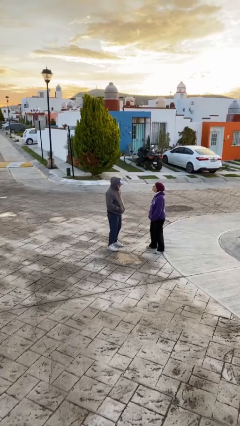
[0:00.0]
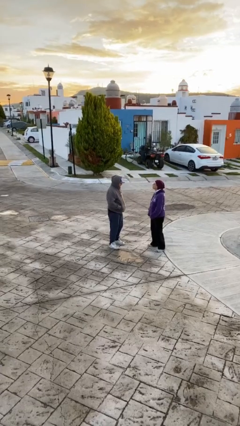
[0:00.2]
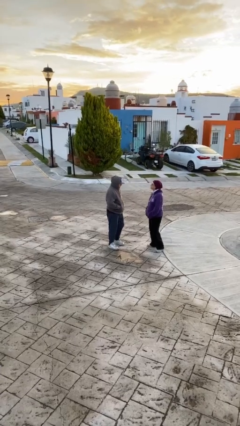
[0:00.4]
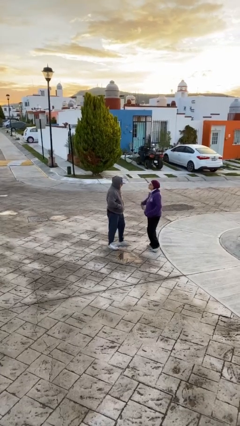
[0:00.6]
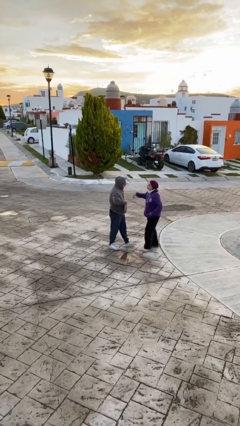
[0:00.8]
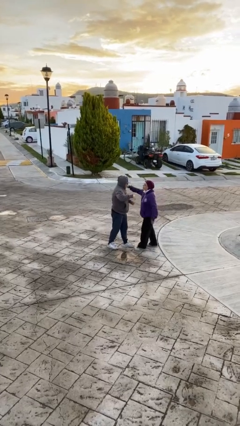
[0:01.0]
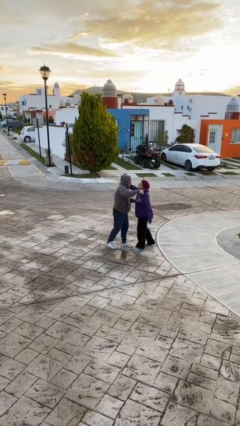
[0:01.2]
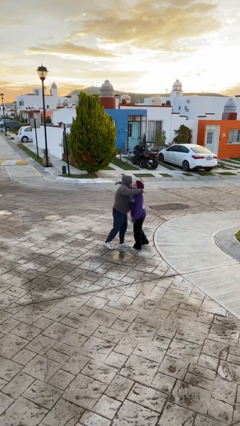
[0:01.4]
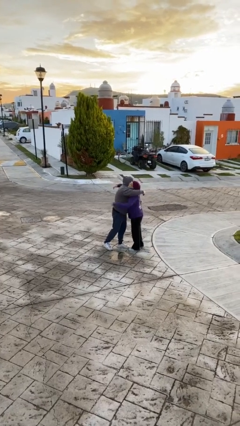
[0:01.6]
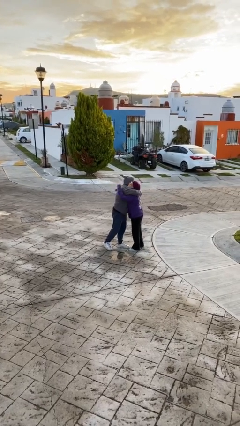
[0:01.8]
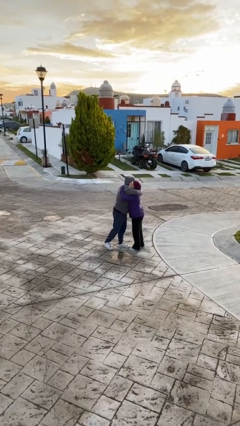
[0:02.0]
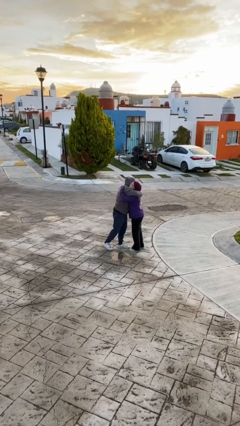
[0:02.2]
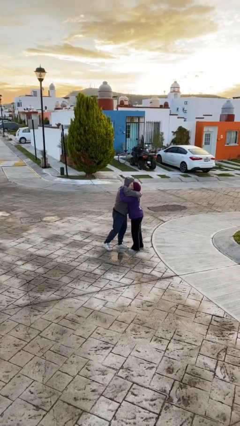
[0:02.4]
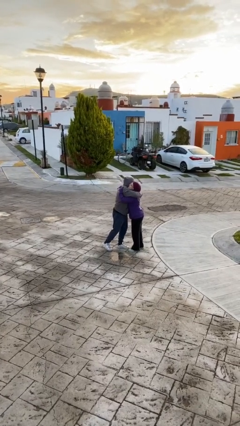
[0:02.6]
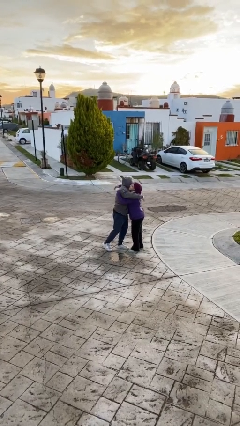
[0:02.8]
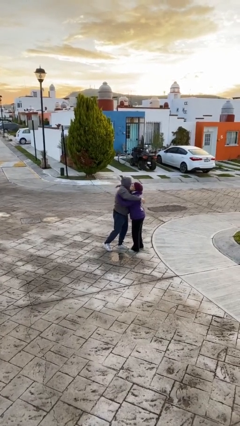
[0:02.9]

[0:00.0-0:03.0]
person embraces person

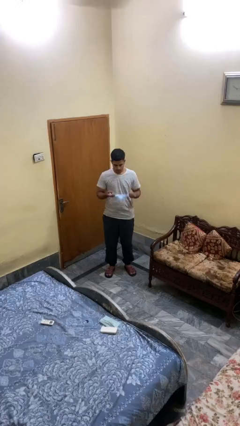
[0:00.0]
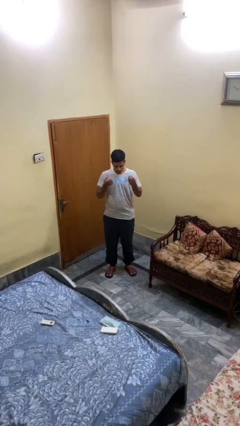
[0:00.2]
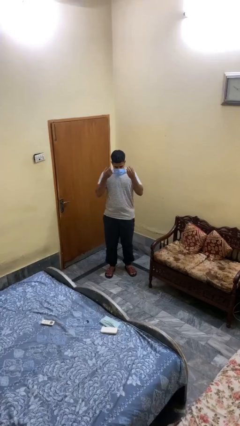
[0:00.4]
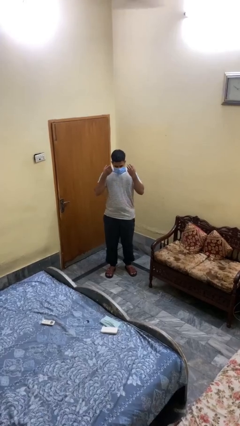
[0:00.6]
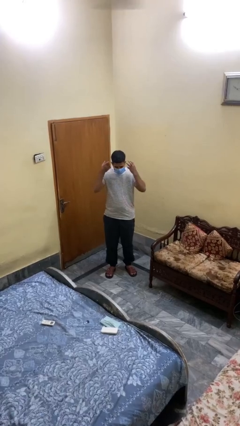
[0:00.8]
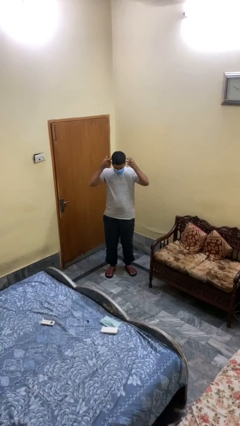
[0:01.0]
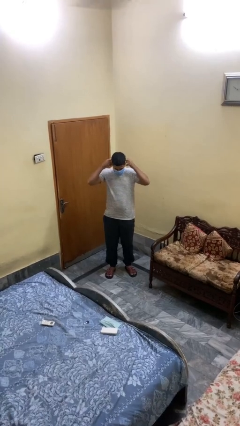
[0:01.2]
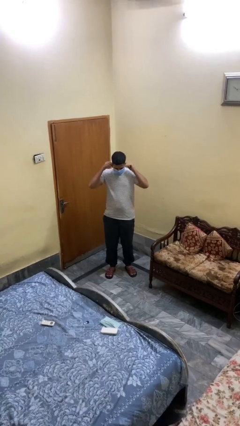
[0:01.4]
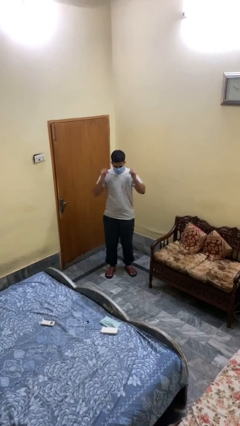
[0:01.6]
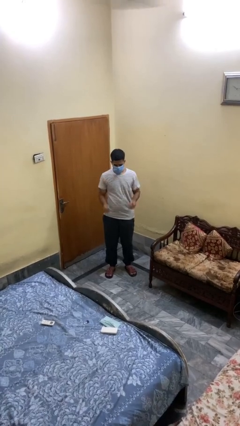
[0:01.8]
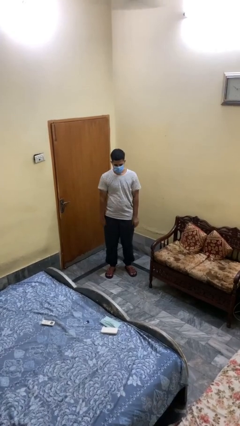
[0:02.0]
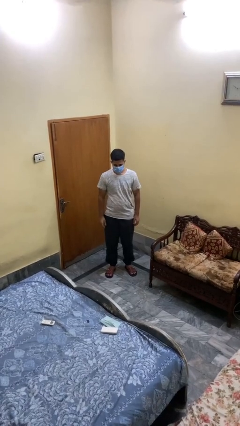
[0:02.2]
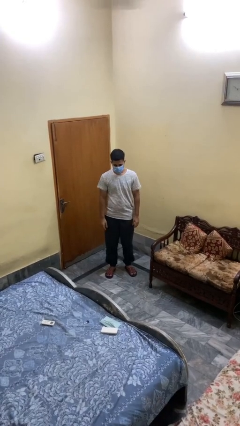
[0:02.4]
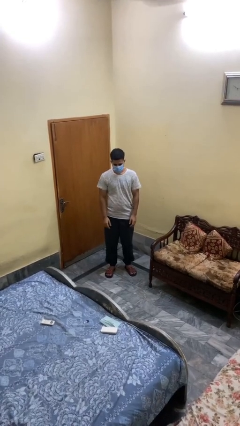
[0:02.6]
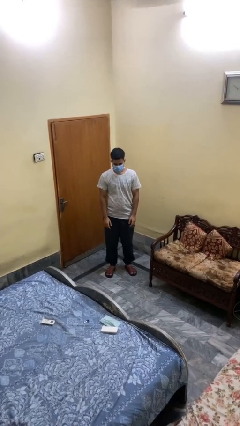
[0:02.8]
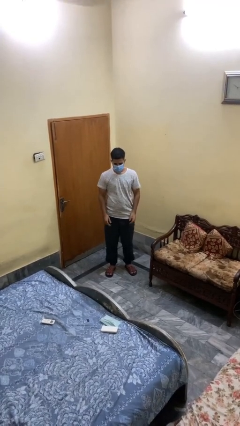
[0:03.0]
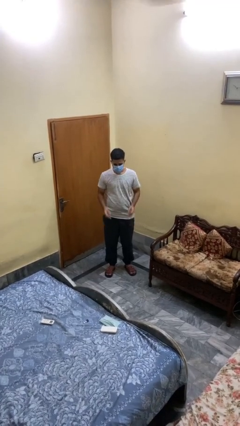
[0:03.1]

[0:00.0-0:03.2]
person puts on facemask

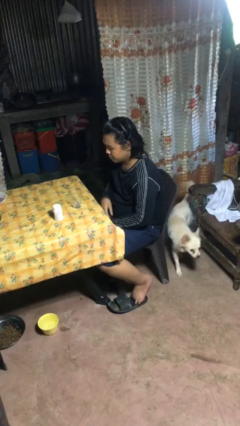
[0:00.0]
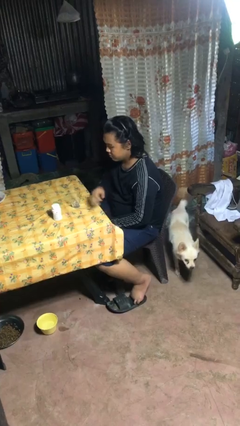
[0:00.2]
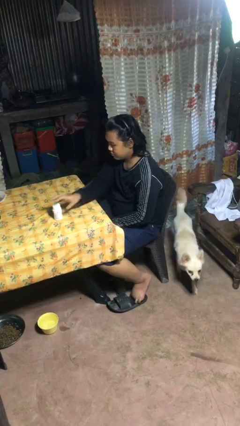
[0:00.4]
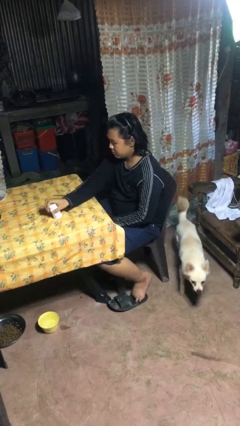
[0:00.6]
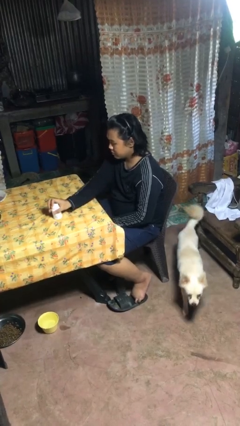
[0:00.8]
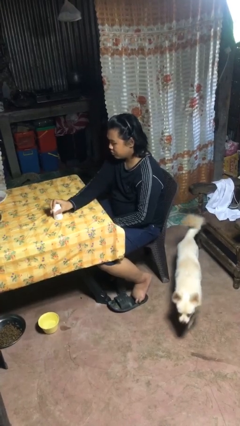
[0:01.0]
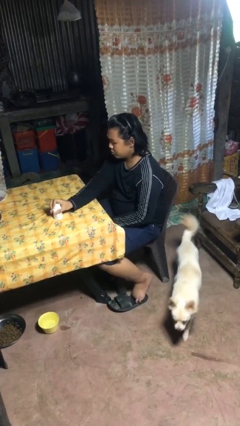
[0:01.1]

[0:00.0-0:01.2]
person knocks over glass

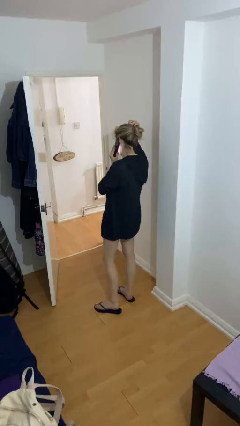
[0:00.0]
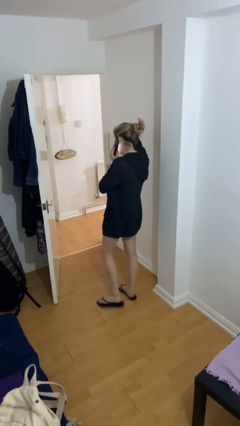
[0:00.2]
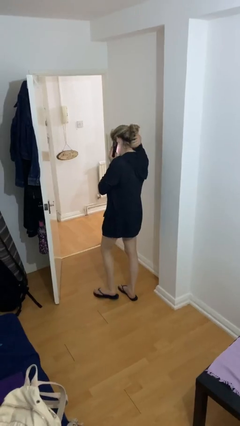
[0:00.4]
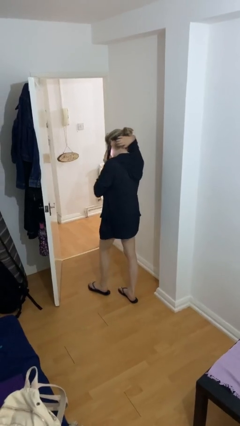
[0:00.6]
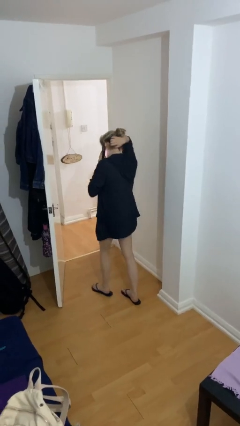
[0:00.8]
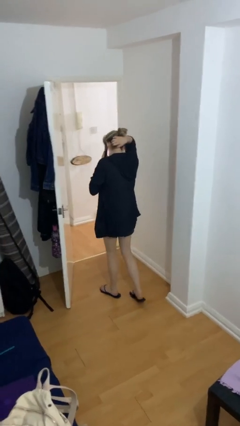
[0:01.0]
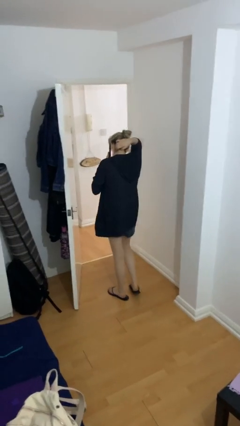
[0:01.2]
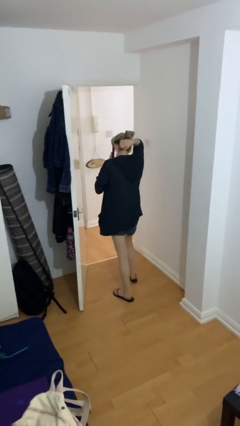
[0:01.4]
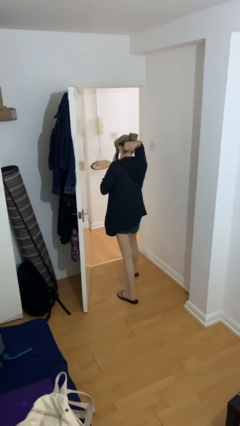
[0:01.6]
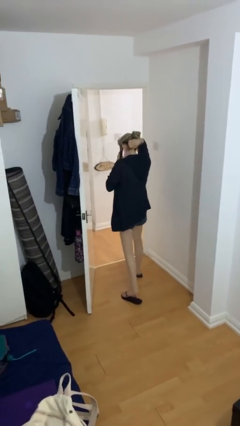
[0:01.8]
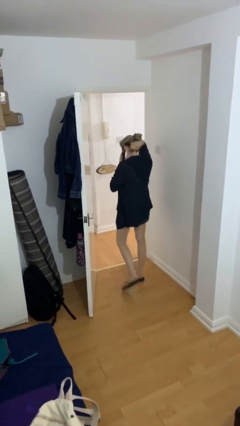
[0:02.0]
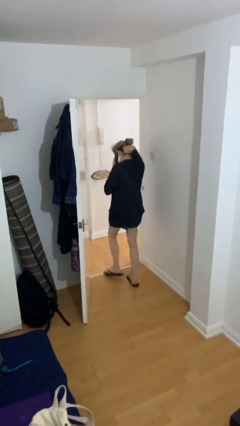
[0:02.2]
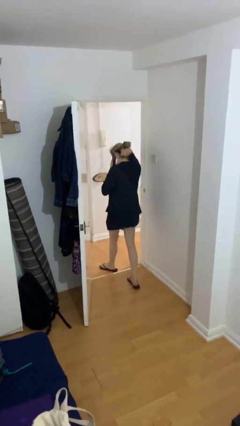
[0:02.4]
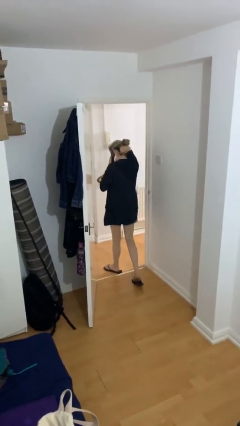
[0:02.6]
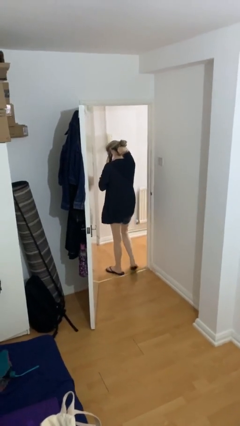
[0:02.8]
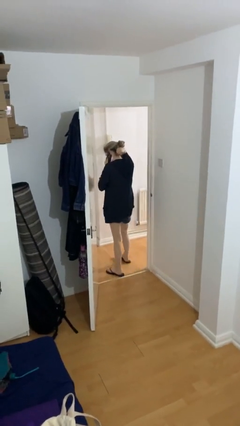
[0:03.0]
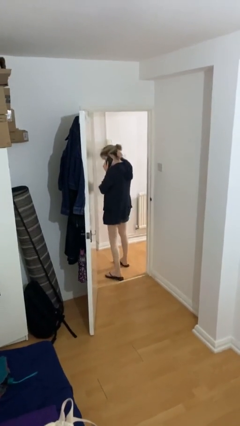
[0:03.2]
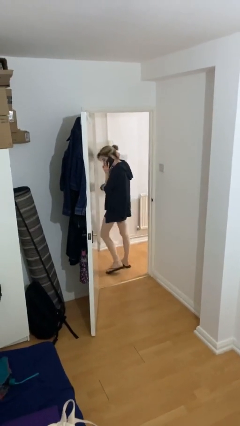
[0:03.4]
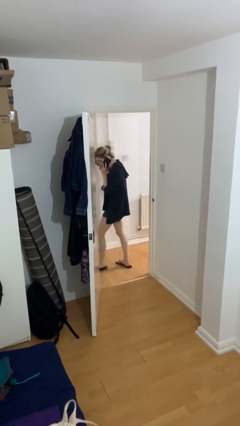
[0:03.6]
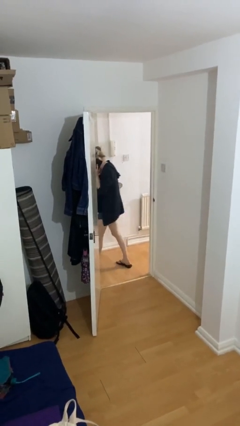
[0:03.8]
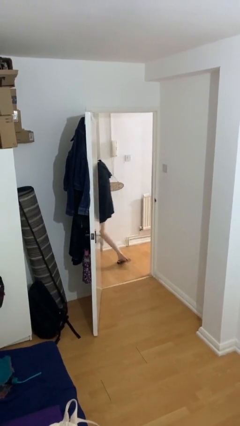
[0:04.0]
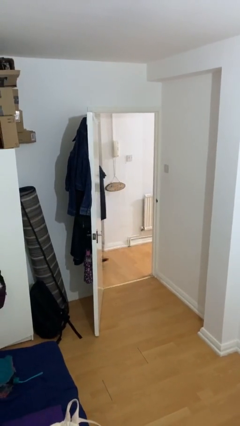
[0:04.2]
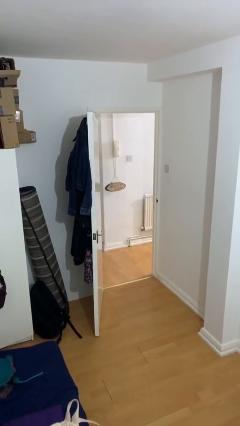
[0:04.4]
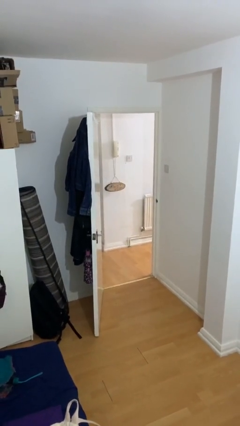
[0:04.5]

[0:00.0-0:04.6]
person exits scene through structure

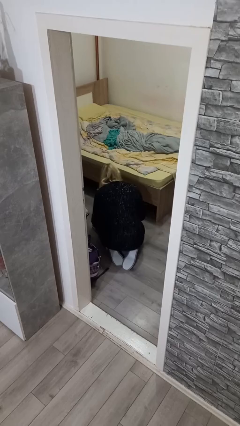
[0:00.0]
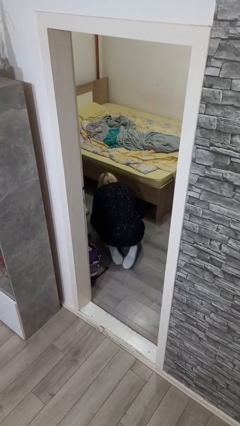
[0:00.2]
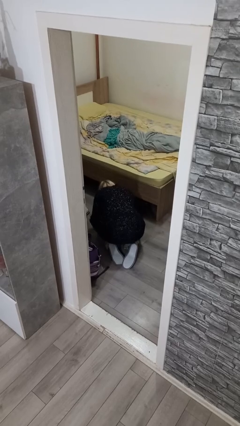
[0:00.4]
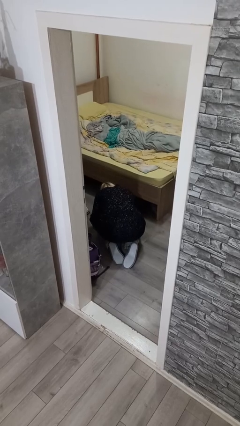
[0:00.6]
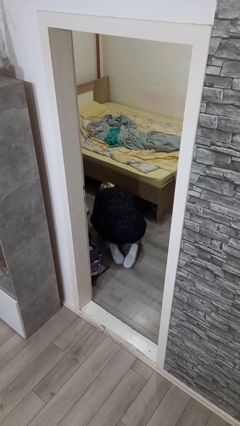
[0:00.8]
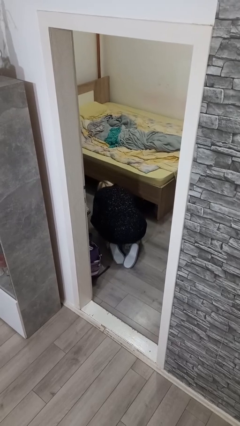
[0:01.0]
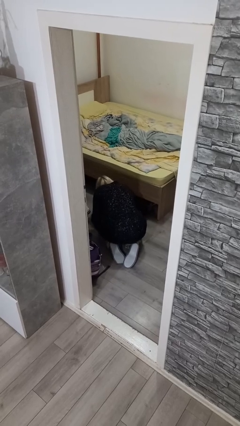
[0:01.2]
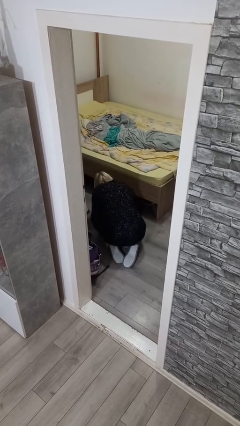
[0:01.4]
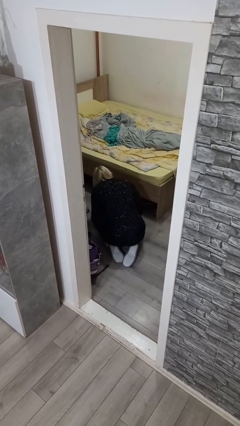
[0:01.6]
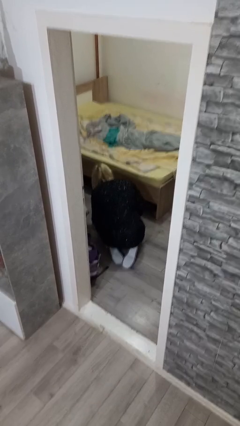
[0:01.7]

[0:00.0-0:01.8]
person searches under bed

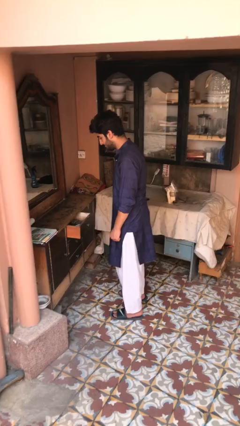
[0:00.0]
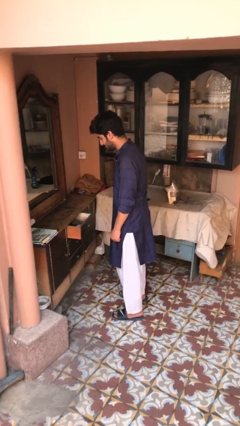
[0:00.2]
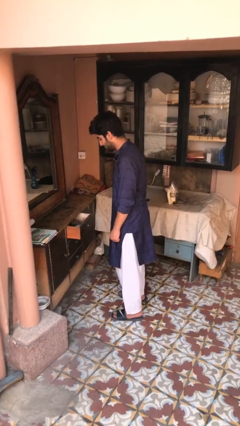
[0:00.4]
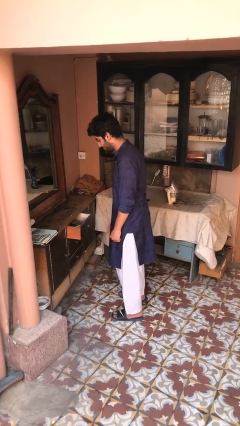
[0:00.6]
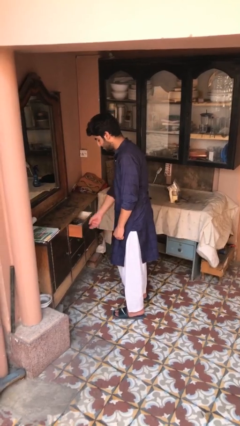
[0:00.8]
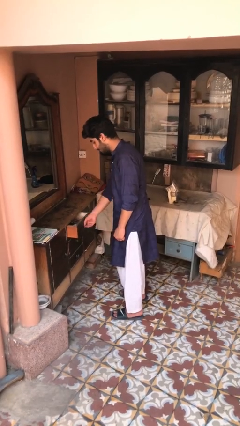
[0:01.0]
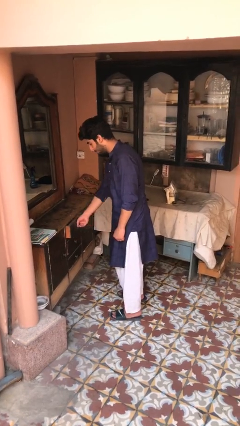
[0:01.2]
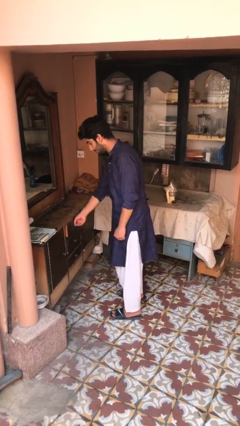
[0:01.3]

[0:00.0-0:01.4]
person closes dresser drawer

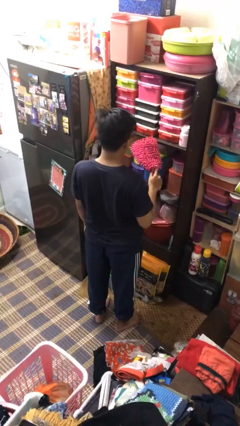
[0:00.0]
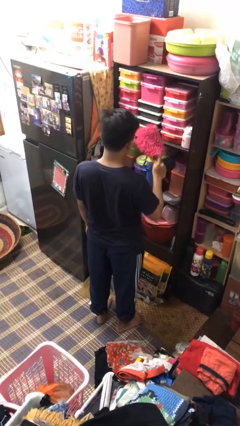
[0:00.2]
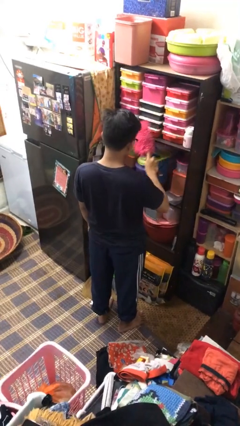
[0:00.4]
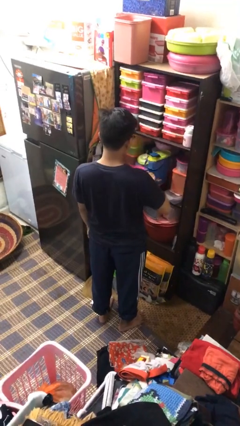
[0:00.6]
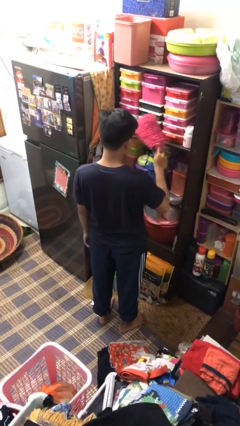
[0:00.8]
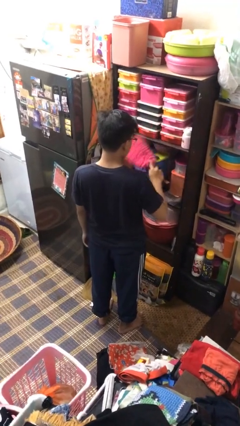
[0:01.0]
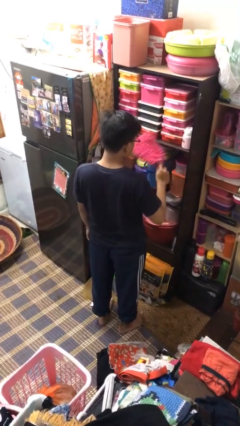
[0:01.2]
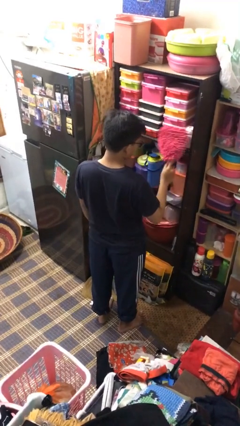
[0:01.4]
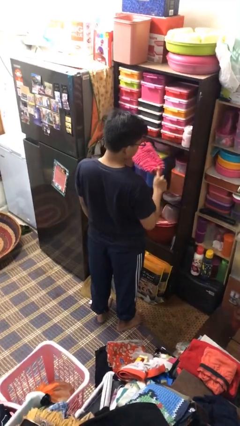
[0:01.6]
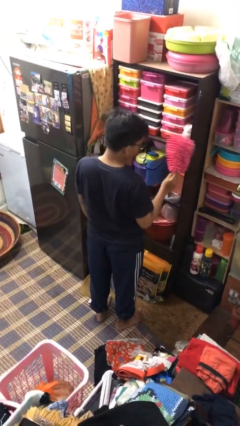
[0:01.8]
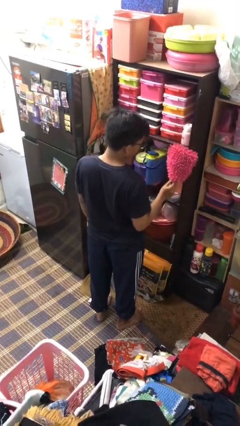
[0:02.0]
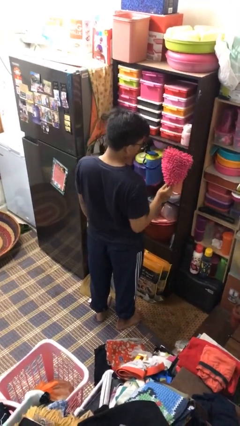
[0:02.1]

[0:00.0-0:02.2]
person dusts furniture
